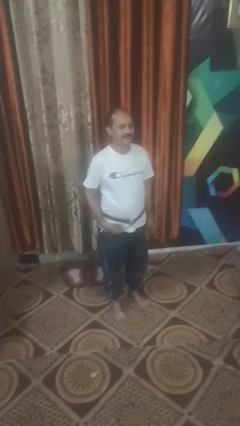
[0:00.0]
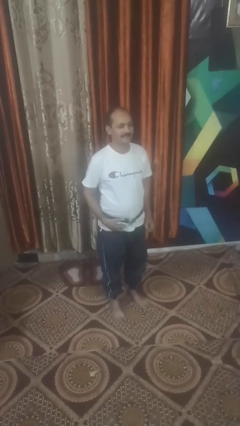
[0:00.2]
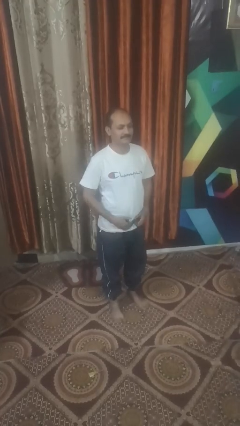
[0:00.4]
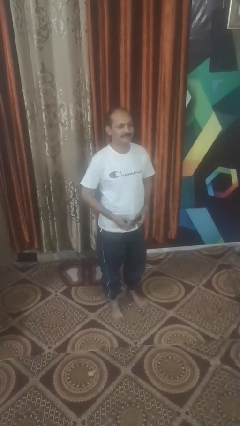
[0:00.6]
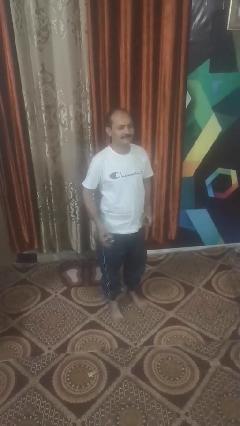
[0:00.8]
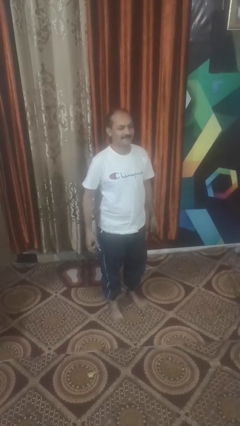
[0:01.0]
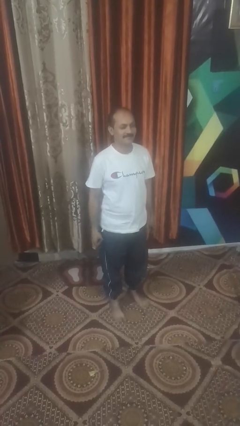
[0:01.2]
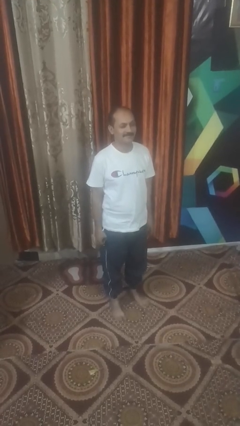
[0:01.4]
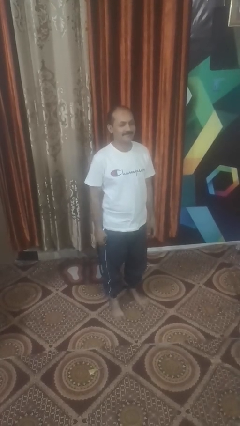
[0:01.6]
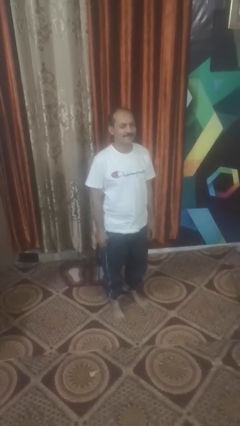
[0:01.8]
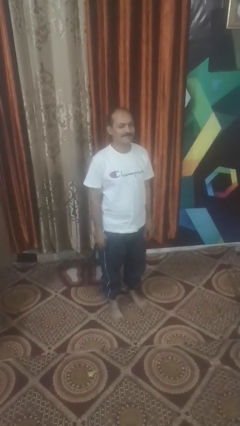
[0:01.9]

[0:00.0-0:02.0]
person takes off belt

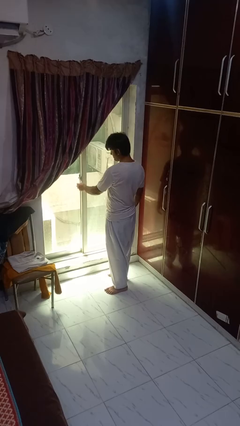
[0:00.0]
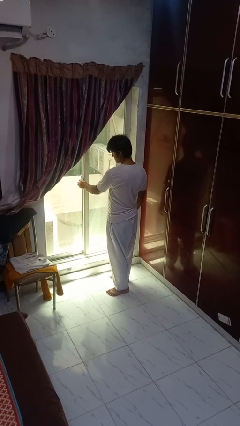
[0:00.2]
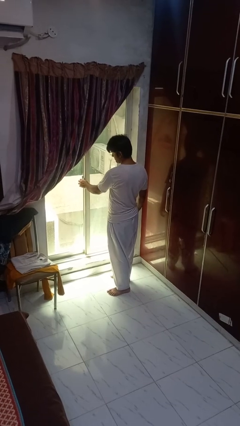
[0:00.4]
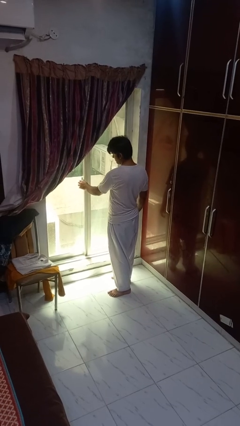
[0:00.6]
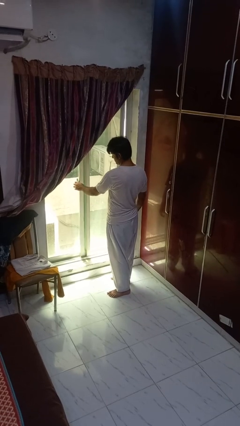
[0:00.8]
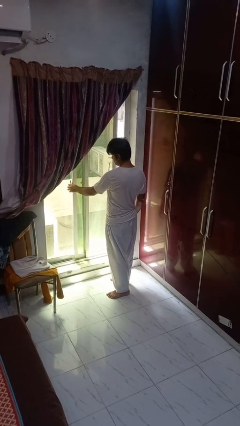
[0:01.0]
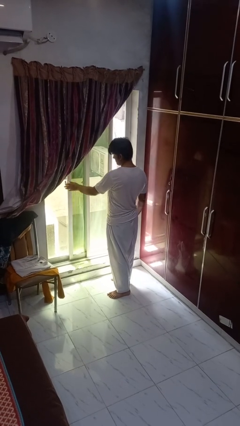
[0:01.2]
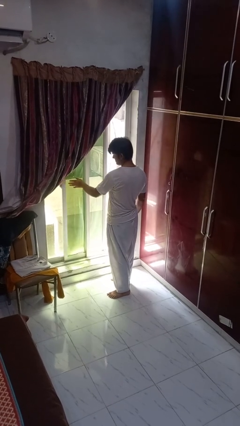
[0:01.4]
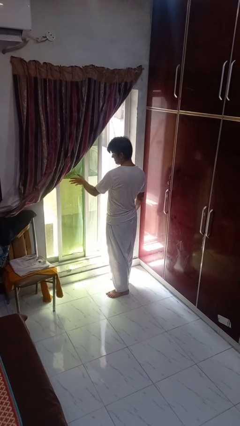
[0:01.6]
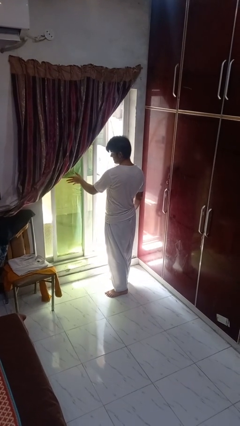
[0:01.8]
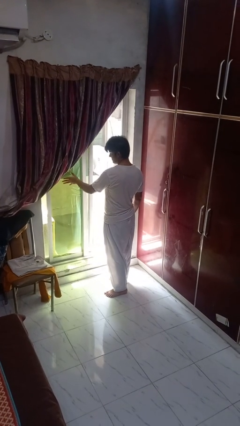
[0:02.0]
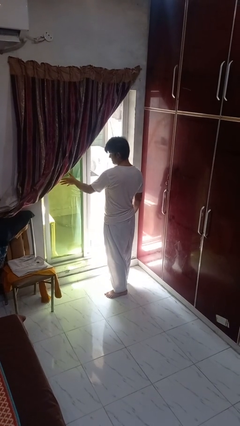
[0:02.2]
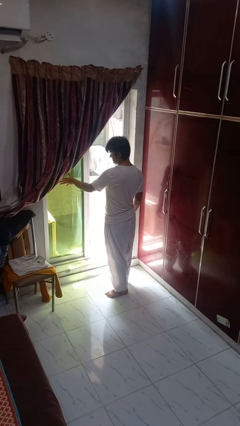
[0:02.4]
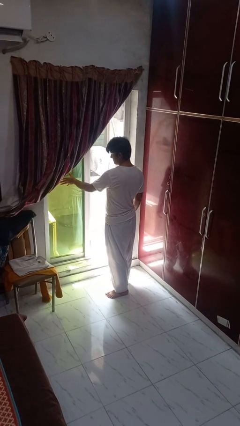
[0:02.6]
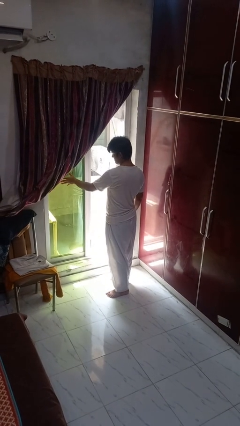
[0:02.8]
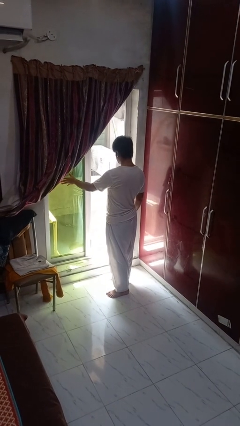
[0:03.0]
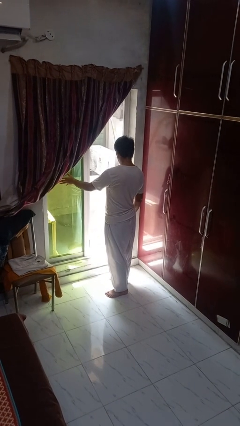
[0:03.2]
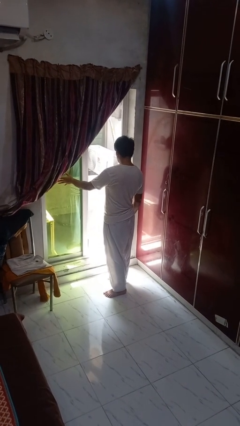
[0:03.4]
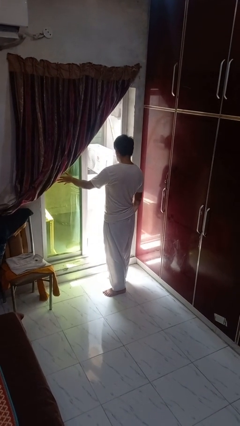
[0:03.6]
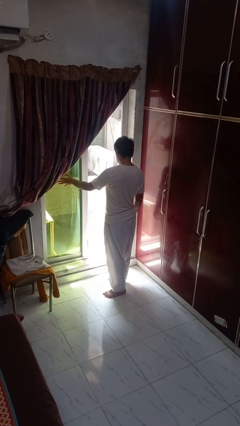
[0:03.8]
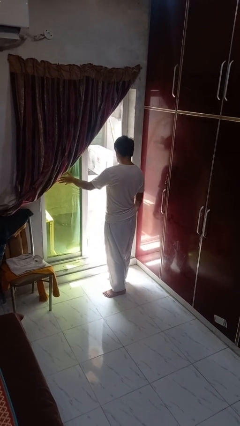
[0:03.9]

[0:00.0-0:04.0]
person opens home window

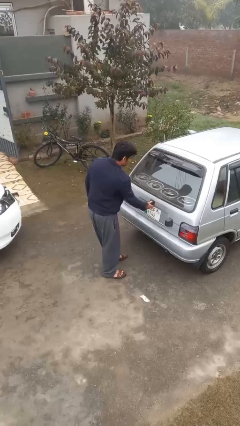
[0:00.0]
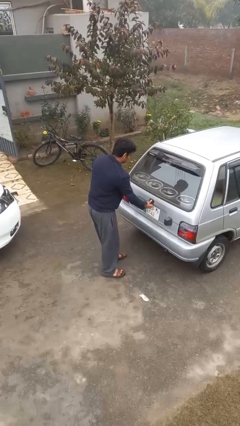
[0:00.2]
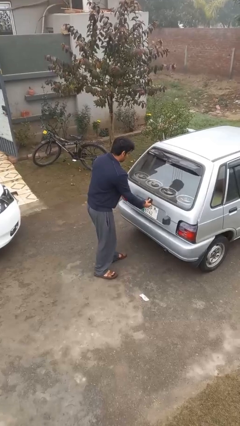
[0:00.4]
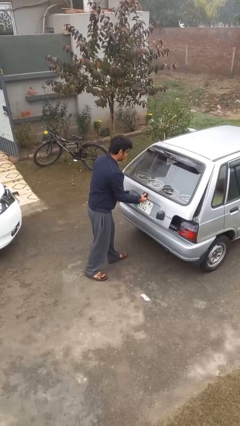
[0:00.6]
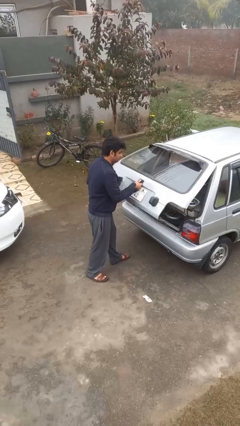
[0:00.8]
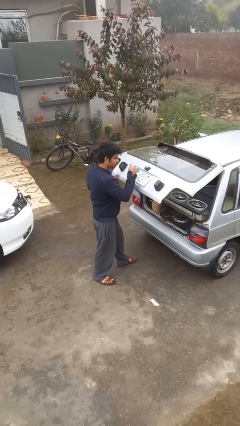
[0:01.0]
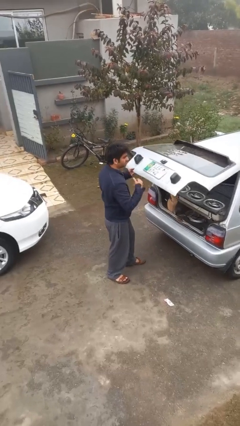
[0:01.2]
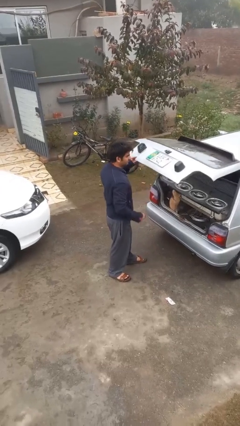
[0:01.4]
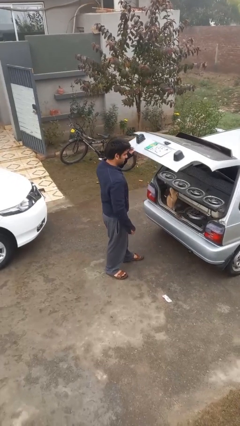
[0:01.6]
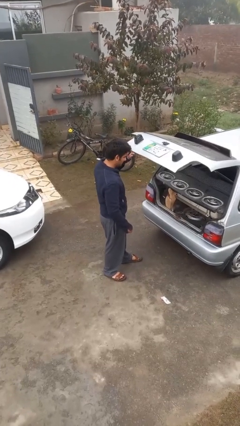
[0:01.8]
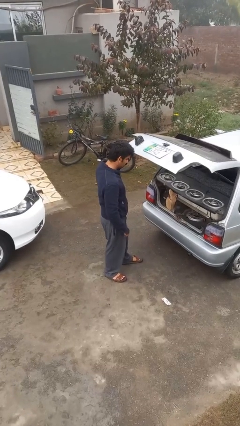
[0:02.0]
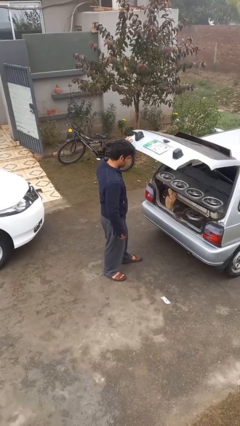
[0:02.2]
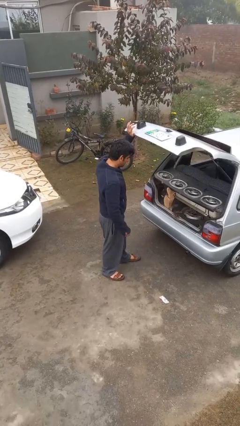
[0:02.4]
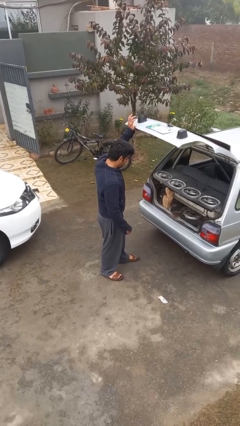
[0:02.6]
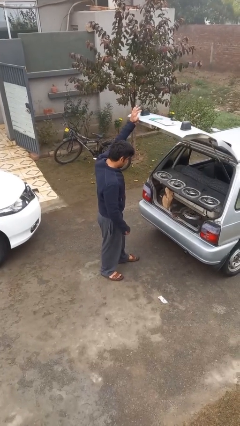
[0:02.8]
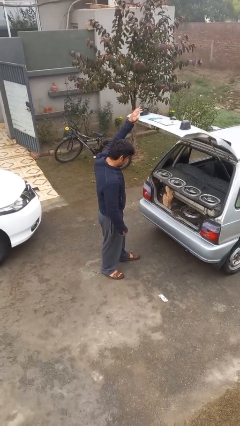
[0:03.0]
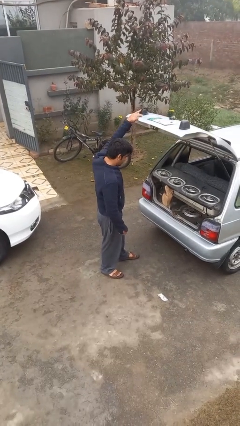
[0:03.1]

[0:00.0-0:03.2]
person opens car trunk

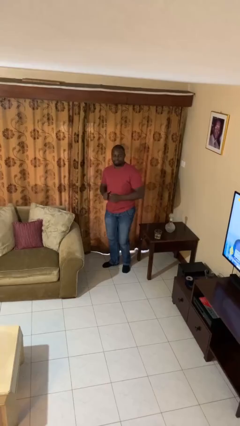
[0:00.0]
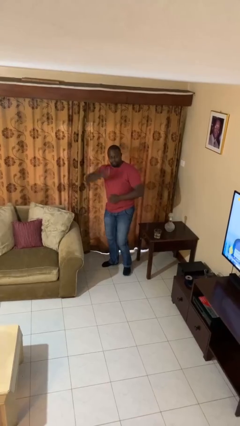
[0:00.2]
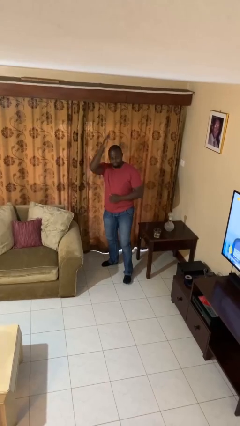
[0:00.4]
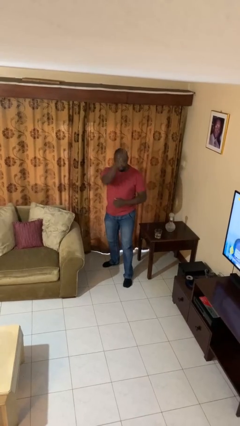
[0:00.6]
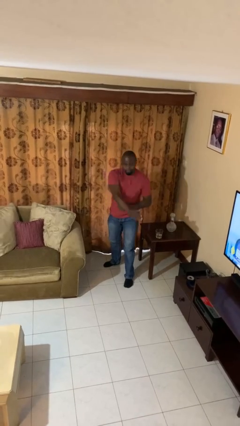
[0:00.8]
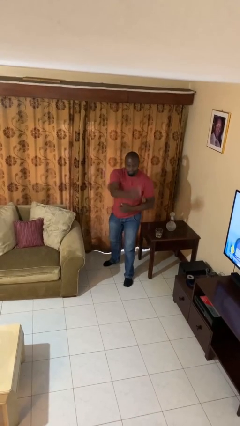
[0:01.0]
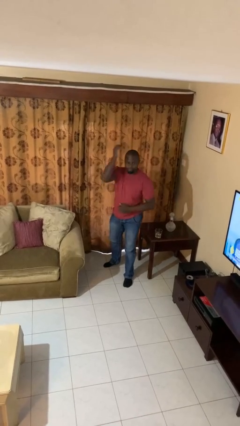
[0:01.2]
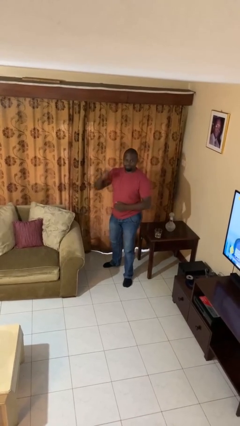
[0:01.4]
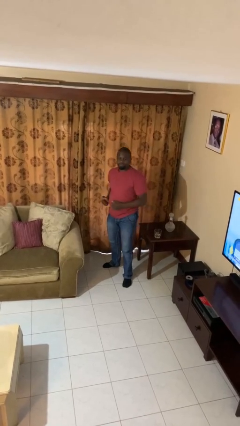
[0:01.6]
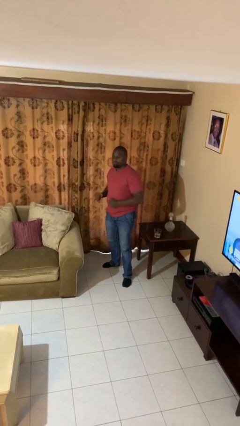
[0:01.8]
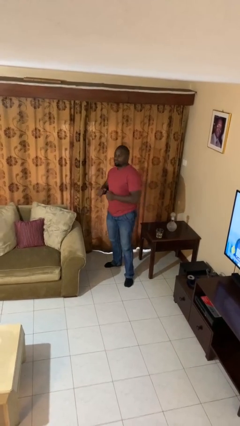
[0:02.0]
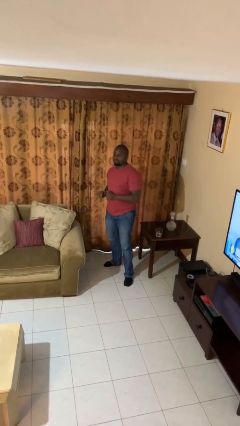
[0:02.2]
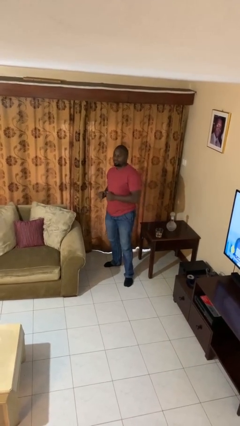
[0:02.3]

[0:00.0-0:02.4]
person karate chop

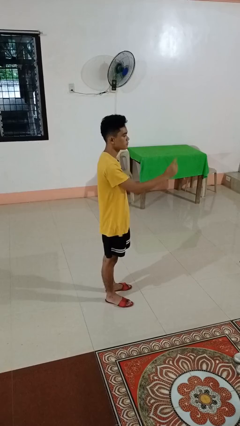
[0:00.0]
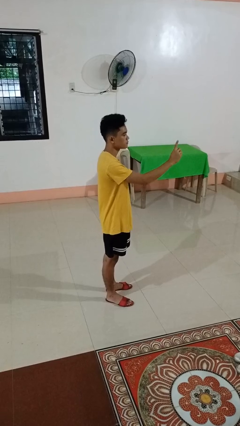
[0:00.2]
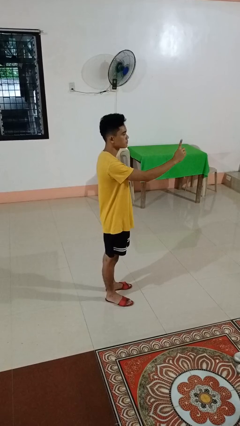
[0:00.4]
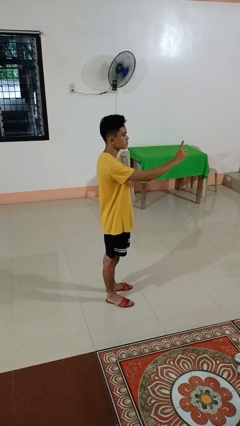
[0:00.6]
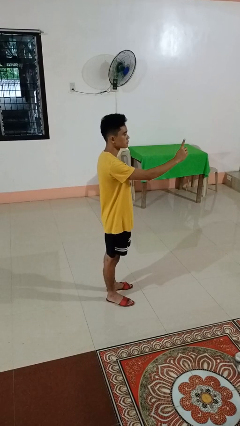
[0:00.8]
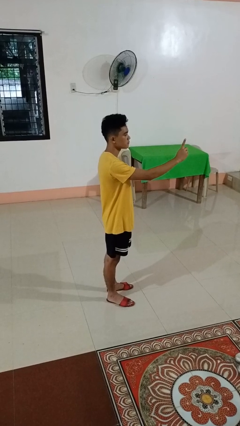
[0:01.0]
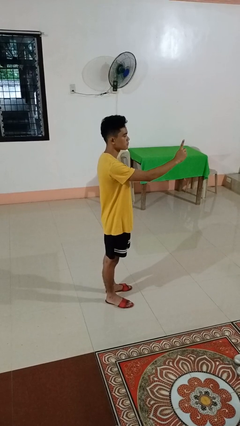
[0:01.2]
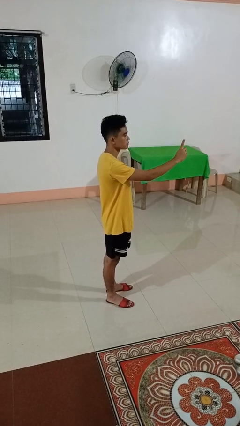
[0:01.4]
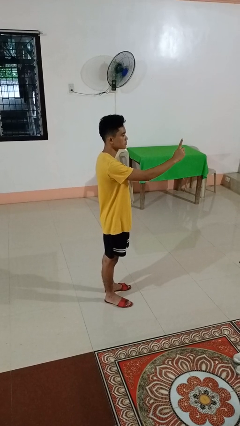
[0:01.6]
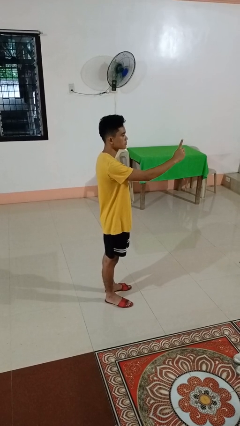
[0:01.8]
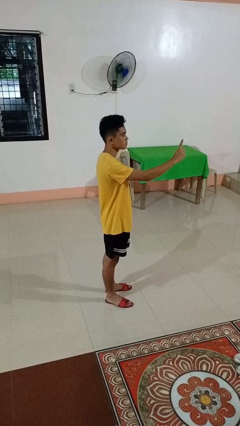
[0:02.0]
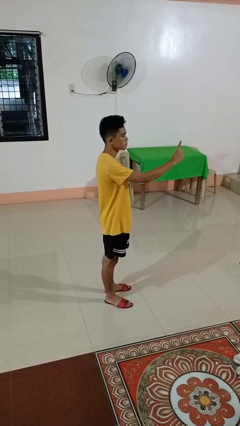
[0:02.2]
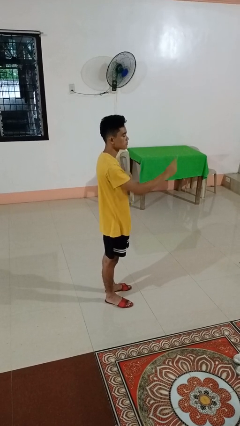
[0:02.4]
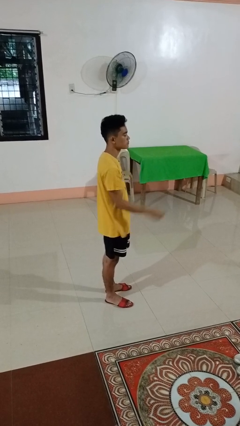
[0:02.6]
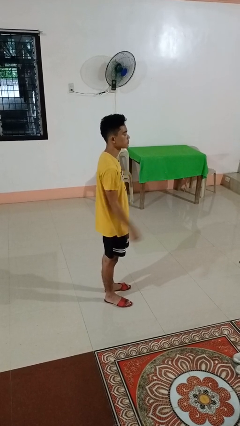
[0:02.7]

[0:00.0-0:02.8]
person gestures number one

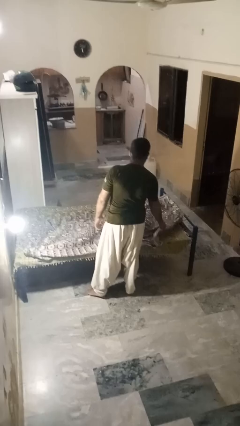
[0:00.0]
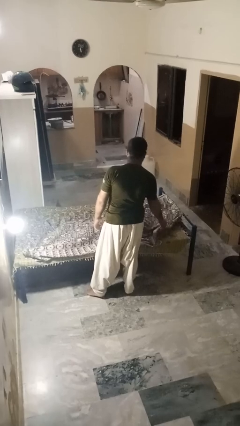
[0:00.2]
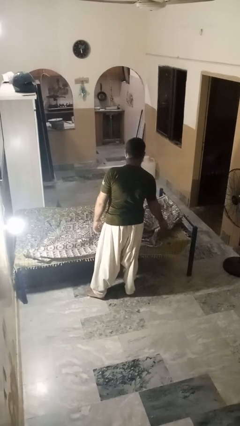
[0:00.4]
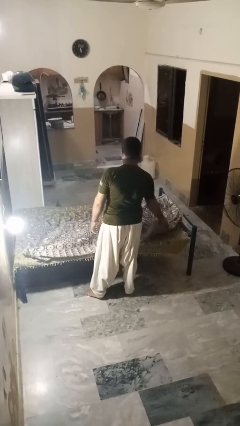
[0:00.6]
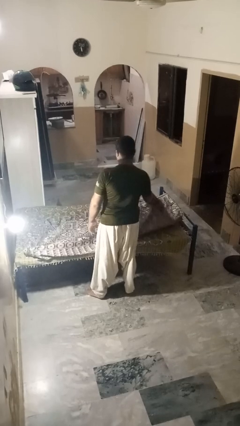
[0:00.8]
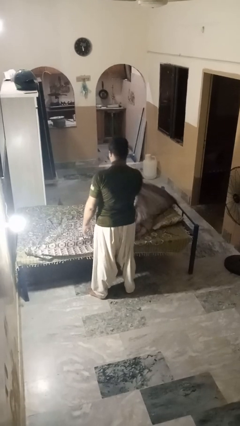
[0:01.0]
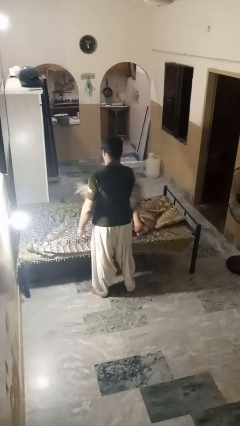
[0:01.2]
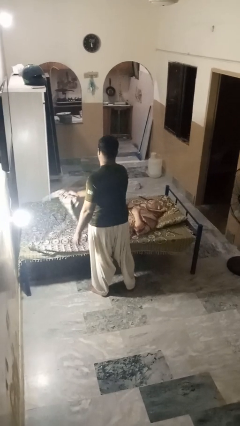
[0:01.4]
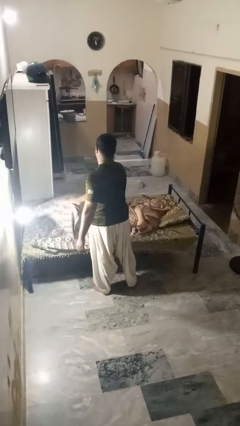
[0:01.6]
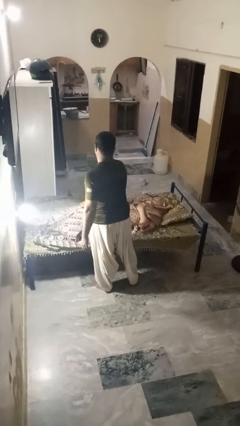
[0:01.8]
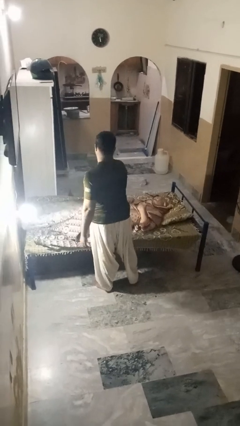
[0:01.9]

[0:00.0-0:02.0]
person uncovers friend with blanket

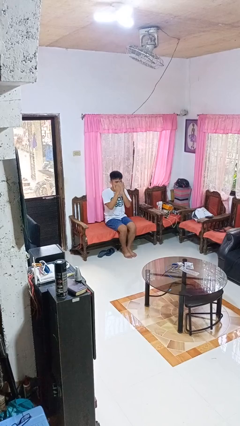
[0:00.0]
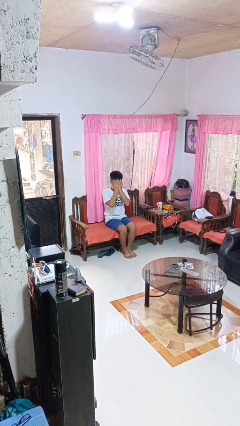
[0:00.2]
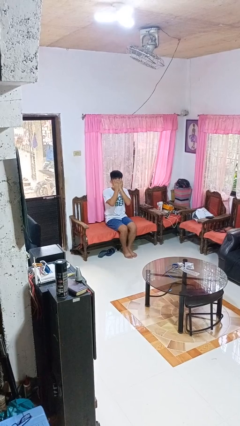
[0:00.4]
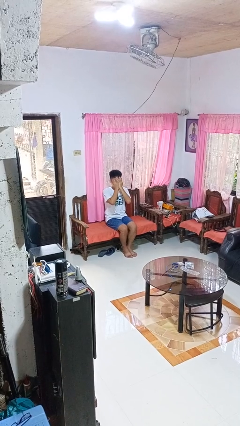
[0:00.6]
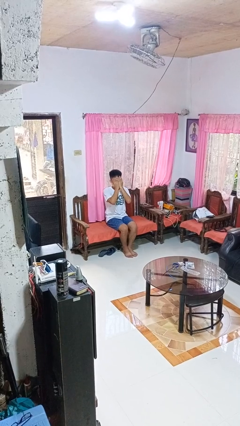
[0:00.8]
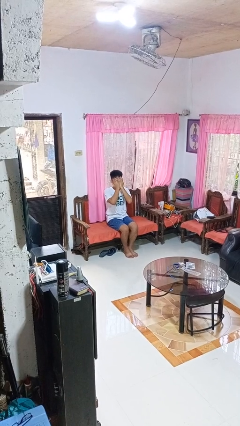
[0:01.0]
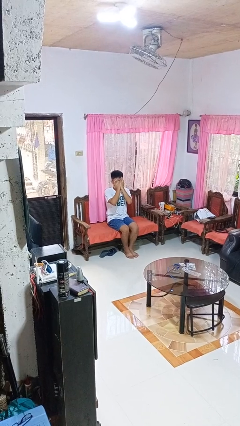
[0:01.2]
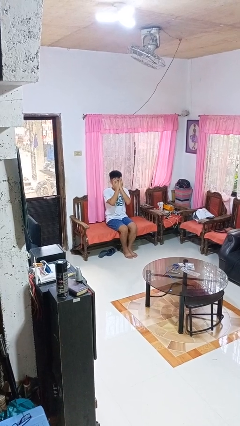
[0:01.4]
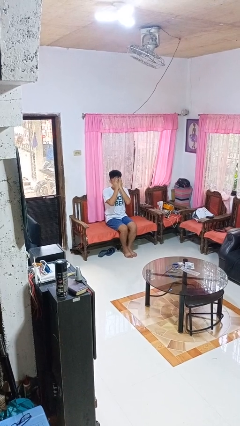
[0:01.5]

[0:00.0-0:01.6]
person covers face with hands
